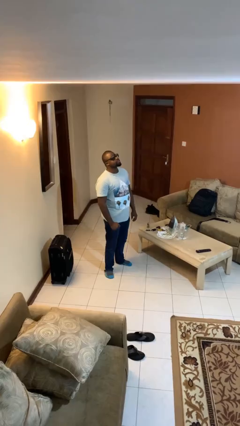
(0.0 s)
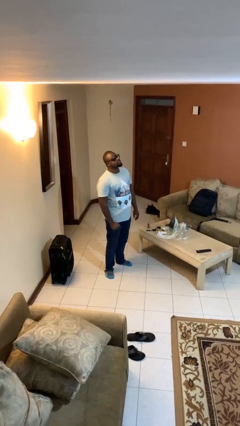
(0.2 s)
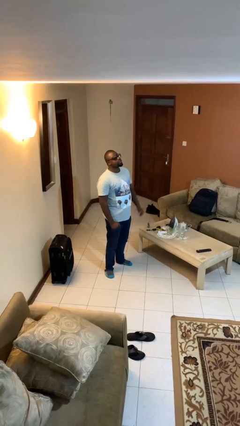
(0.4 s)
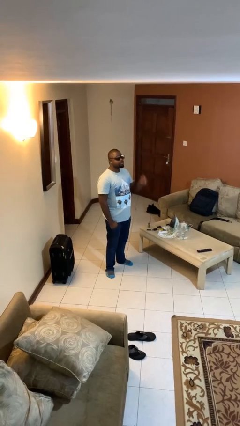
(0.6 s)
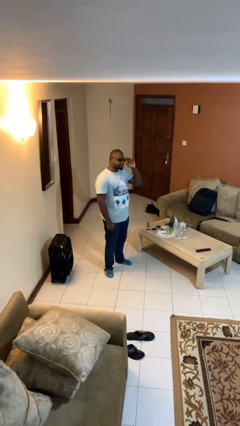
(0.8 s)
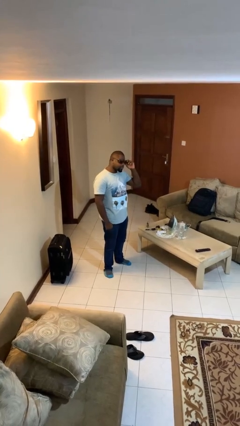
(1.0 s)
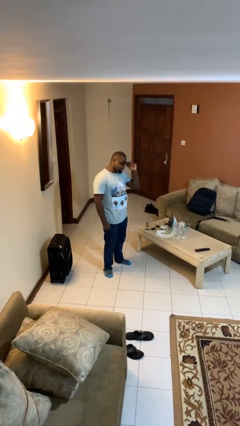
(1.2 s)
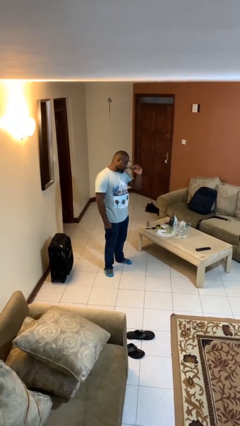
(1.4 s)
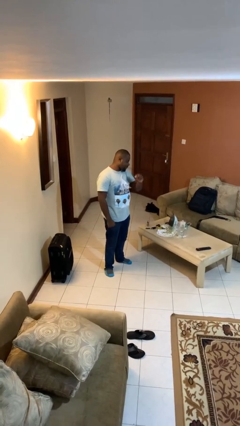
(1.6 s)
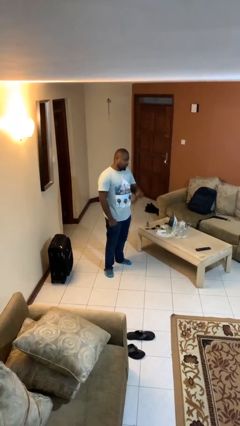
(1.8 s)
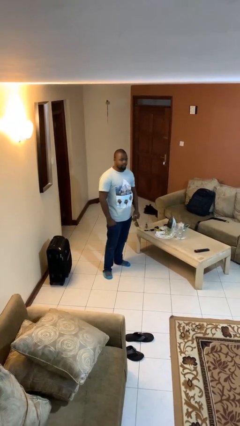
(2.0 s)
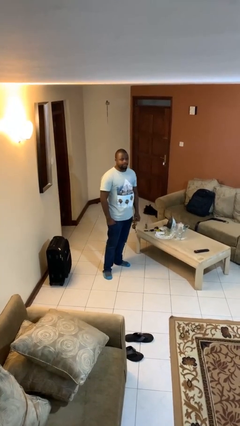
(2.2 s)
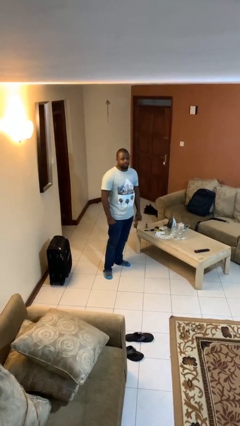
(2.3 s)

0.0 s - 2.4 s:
person takes off sunglasses

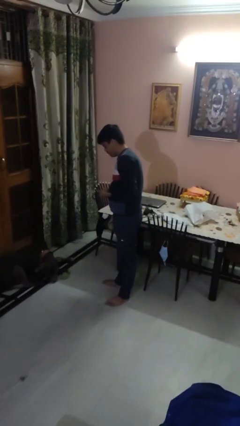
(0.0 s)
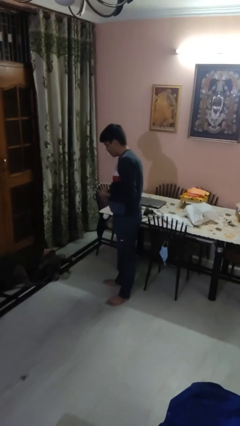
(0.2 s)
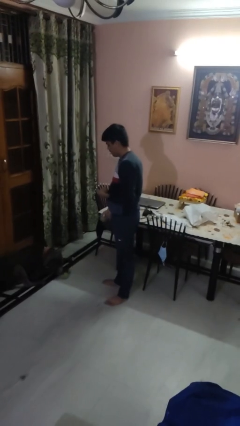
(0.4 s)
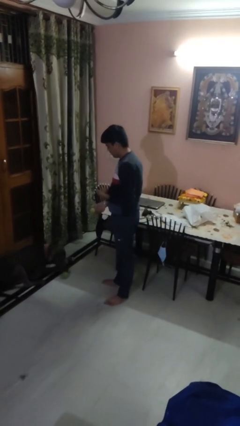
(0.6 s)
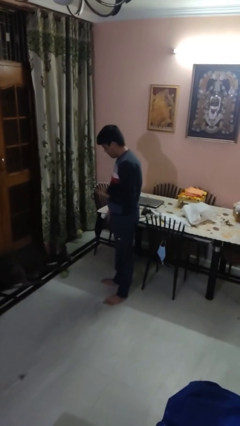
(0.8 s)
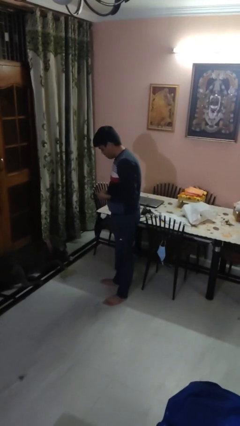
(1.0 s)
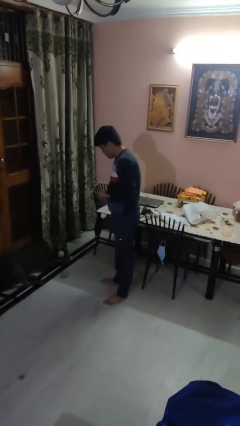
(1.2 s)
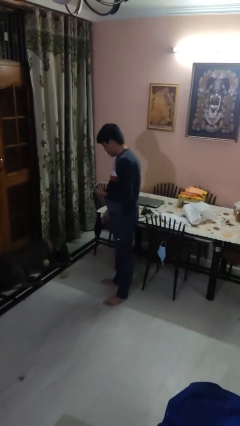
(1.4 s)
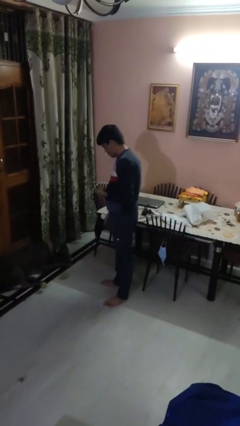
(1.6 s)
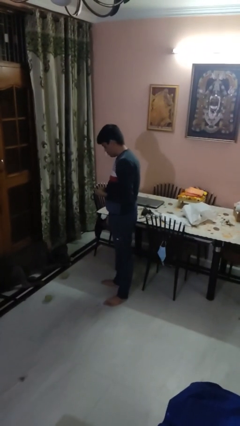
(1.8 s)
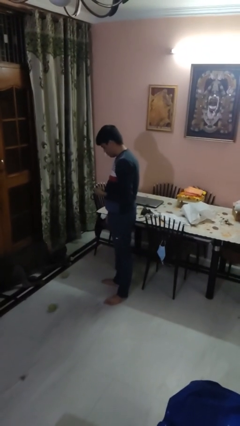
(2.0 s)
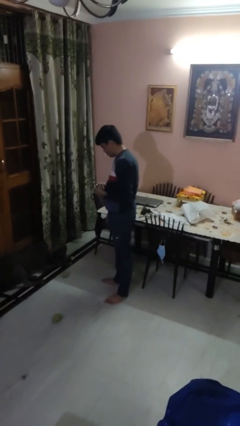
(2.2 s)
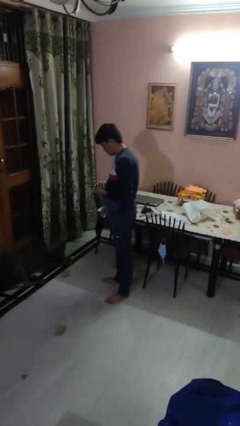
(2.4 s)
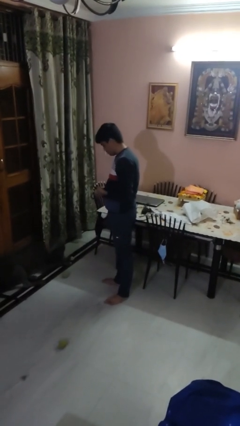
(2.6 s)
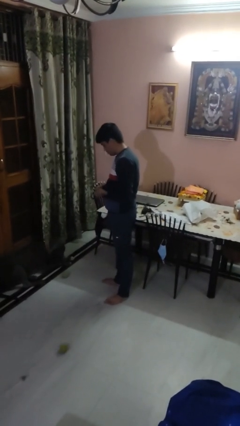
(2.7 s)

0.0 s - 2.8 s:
person throws object to dog

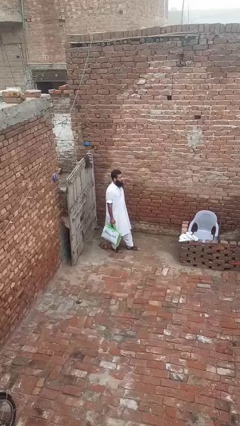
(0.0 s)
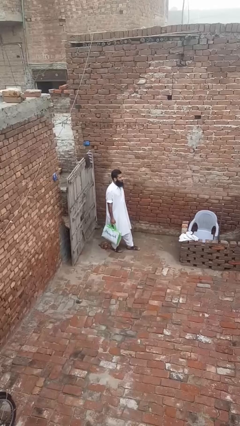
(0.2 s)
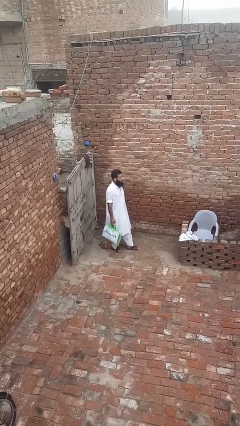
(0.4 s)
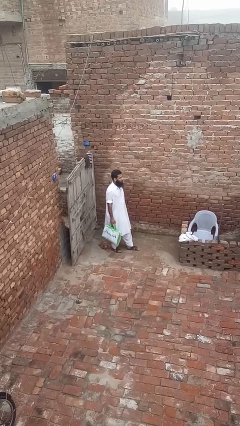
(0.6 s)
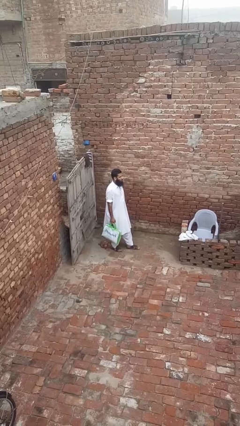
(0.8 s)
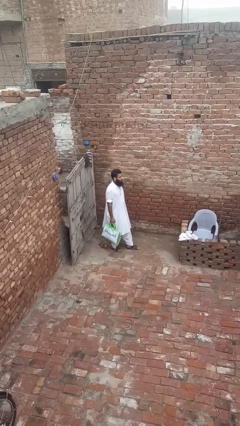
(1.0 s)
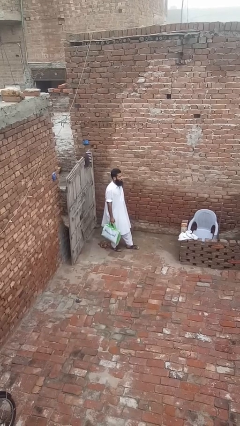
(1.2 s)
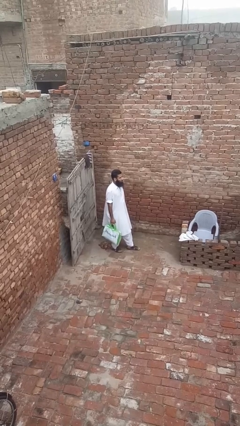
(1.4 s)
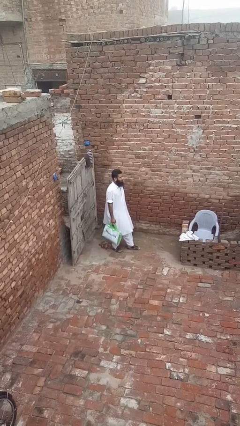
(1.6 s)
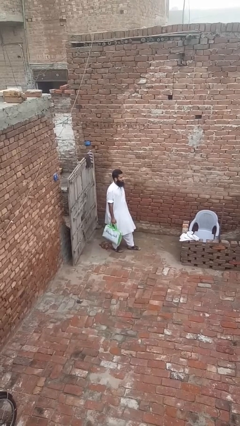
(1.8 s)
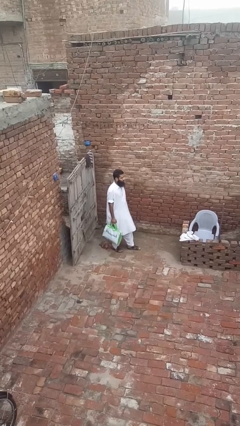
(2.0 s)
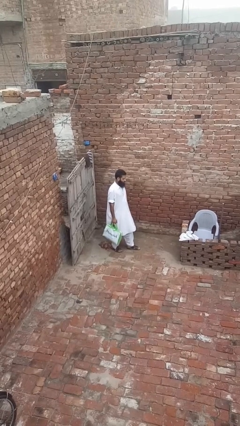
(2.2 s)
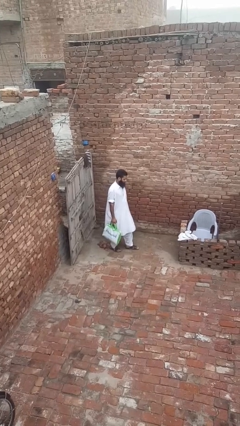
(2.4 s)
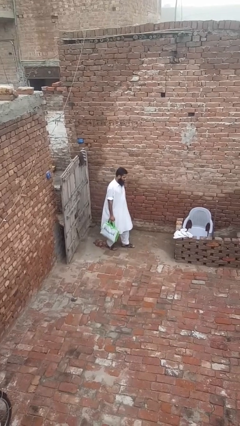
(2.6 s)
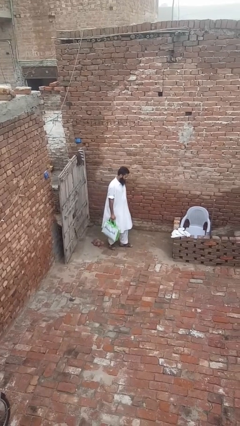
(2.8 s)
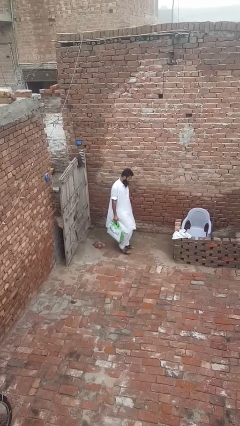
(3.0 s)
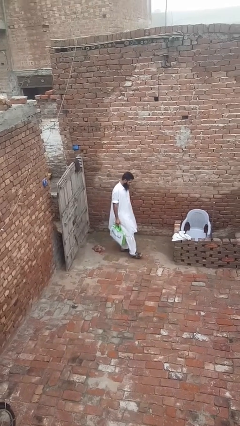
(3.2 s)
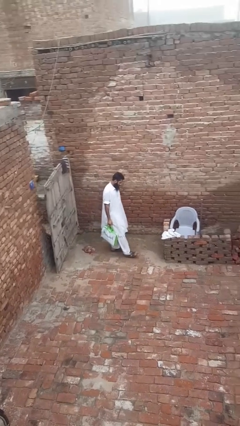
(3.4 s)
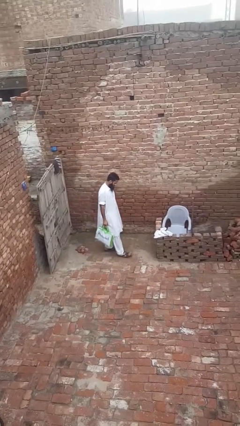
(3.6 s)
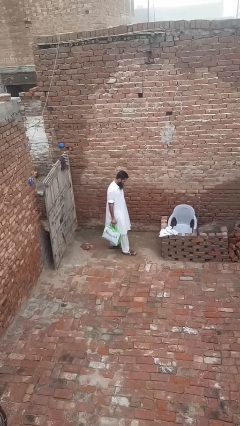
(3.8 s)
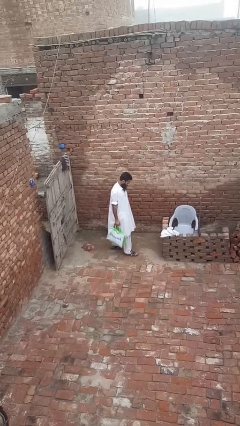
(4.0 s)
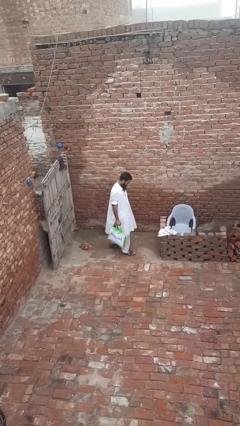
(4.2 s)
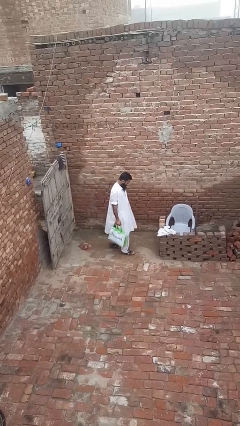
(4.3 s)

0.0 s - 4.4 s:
person carries groceries

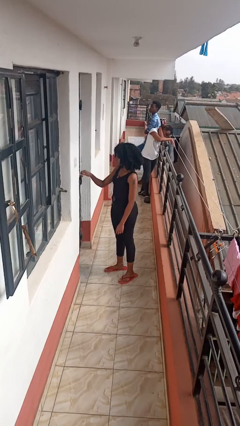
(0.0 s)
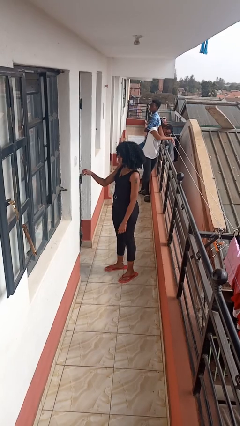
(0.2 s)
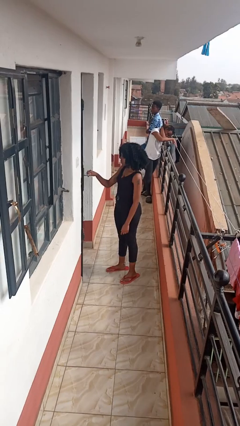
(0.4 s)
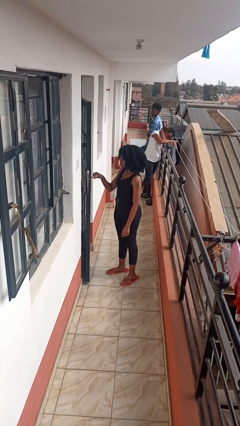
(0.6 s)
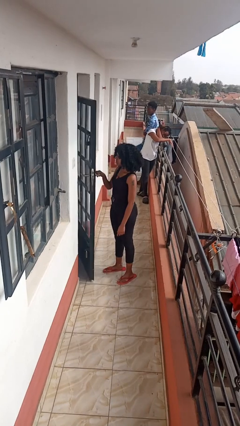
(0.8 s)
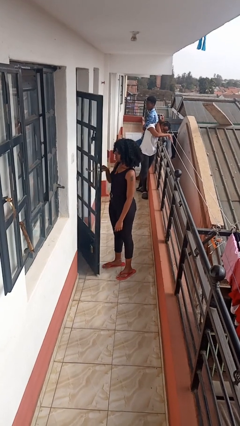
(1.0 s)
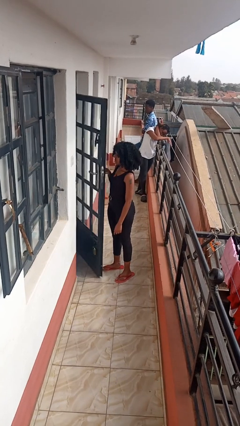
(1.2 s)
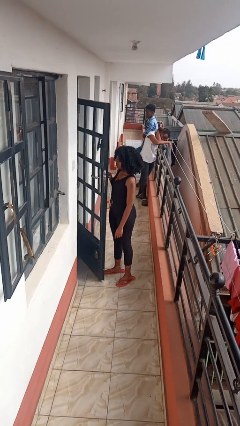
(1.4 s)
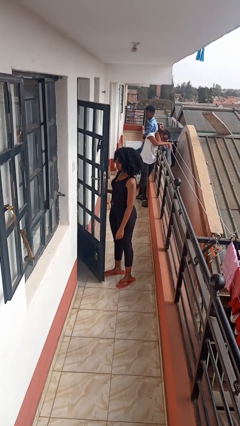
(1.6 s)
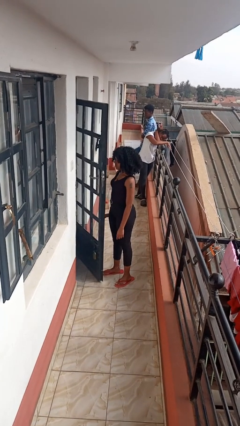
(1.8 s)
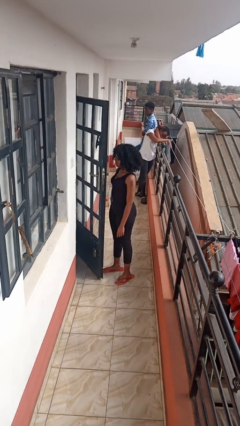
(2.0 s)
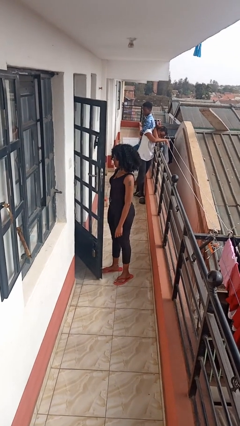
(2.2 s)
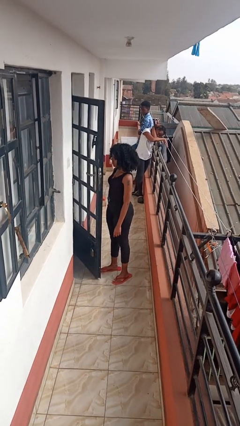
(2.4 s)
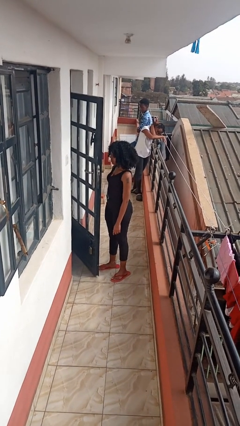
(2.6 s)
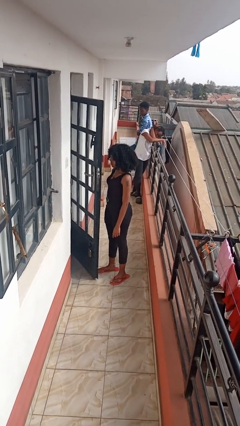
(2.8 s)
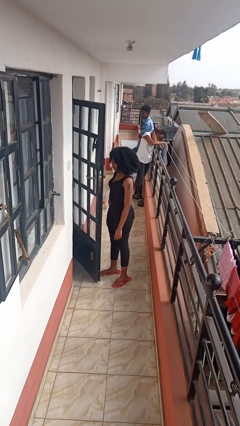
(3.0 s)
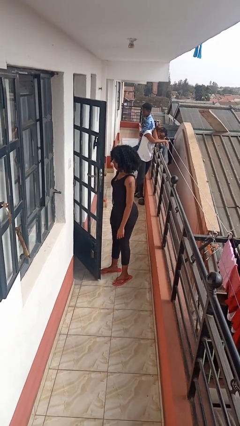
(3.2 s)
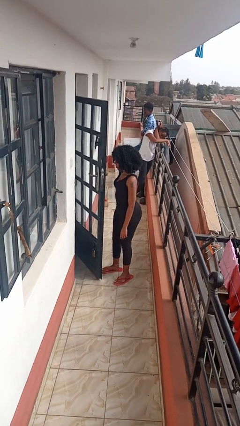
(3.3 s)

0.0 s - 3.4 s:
person opens facility door

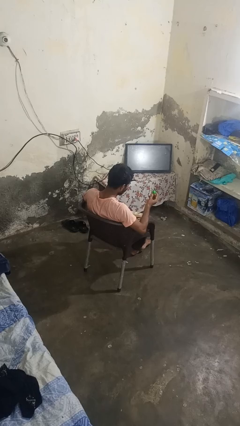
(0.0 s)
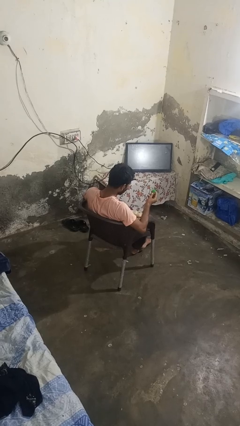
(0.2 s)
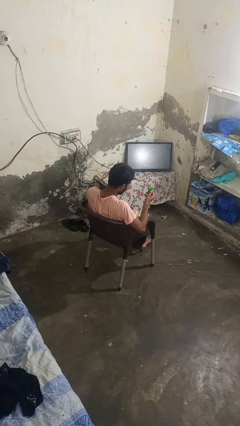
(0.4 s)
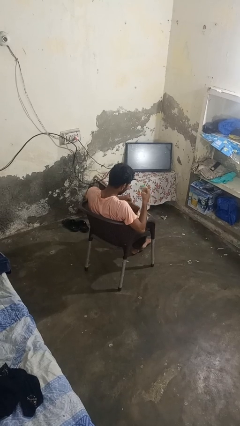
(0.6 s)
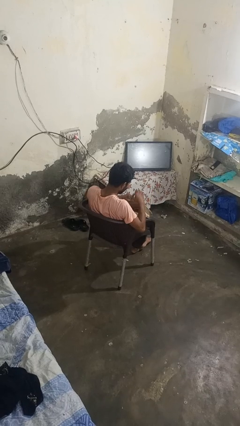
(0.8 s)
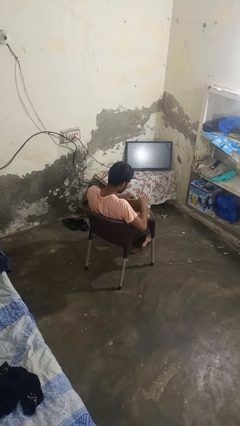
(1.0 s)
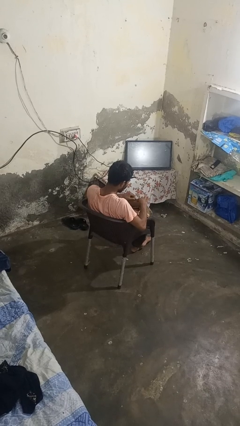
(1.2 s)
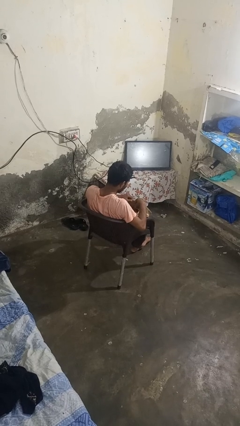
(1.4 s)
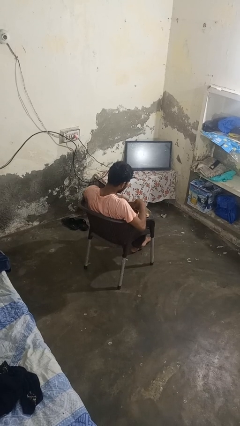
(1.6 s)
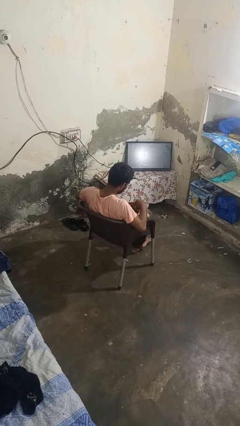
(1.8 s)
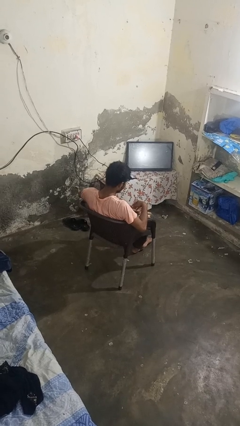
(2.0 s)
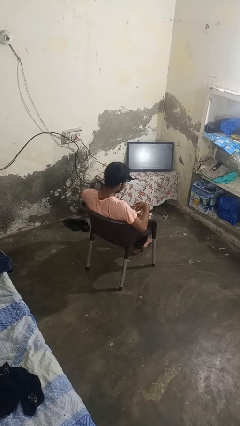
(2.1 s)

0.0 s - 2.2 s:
person puts object into purse

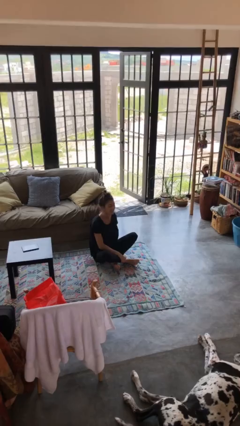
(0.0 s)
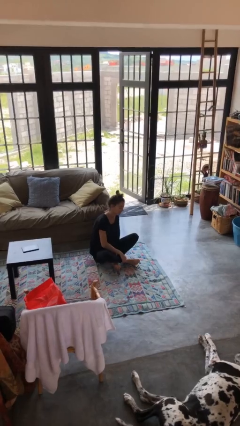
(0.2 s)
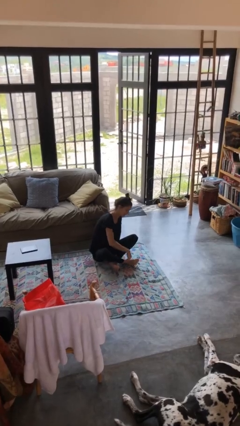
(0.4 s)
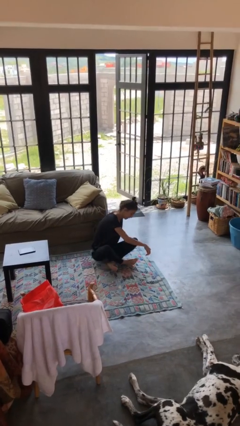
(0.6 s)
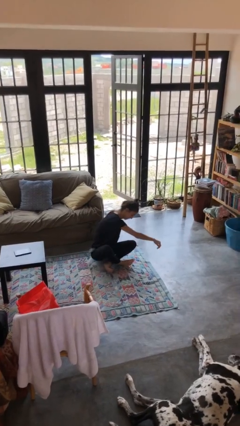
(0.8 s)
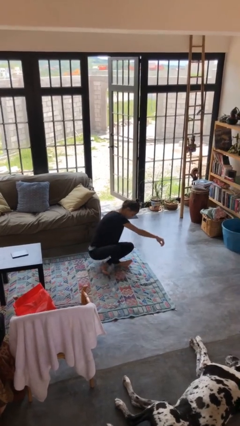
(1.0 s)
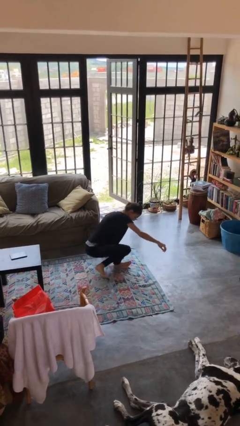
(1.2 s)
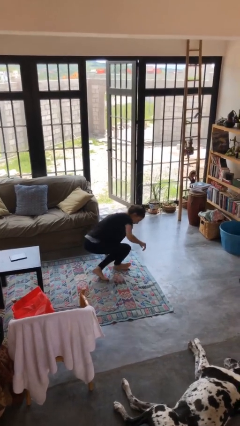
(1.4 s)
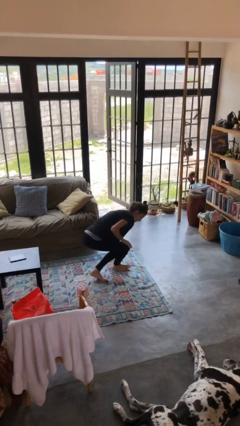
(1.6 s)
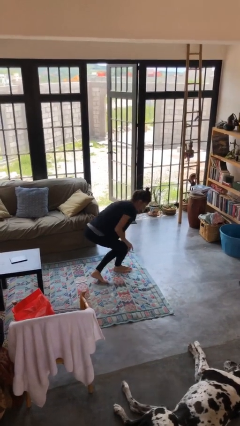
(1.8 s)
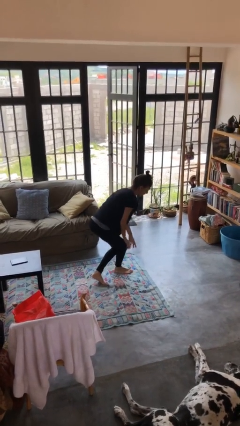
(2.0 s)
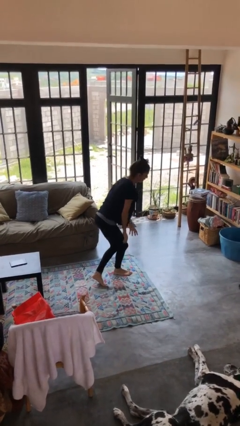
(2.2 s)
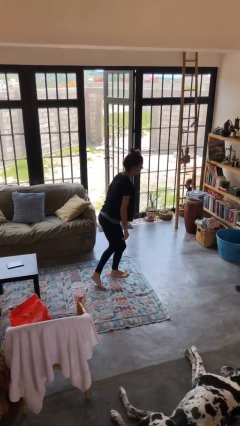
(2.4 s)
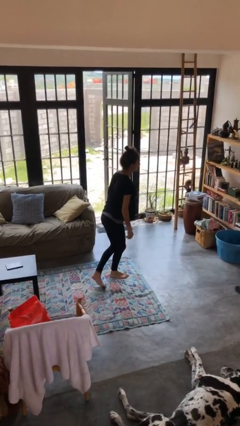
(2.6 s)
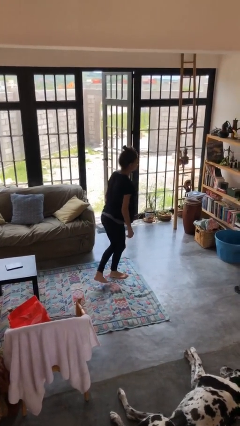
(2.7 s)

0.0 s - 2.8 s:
person stands up from floor
